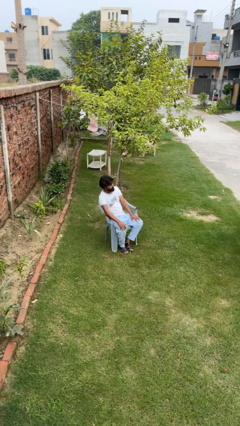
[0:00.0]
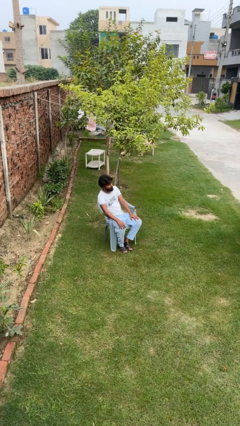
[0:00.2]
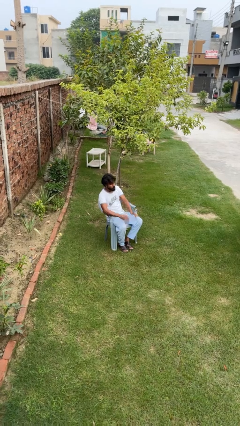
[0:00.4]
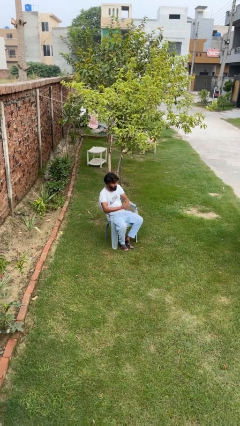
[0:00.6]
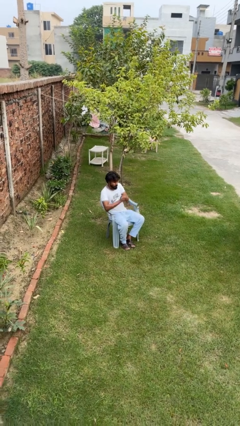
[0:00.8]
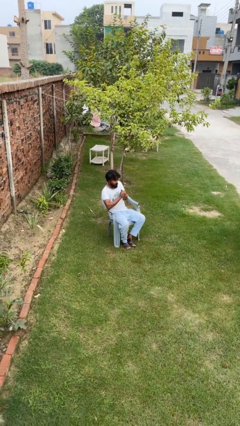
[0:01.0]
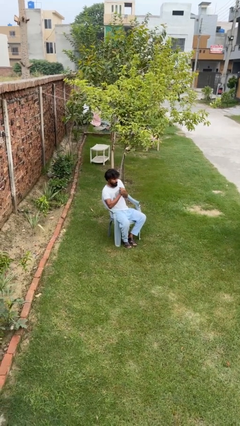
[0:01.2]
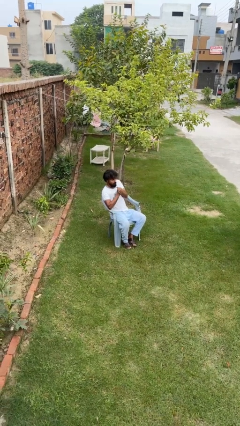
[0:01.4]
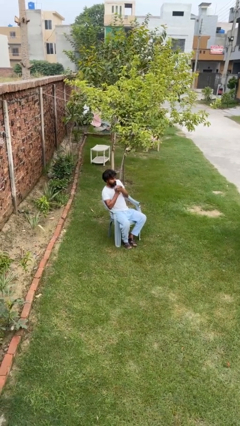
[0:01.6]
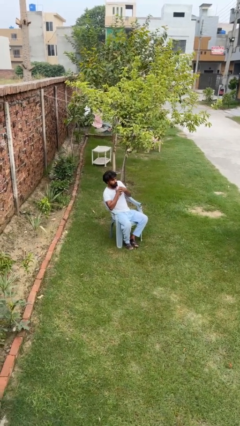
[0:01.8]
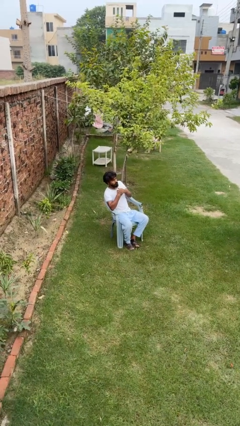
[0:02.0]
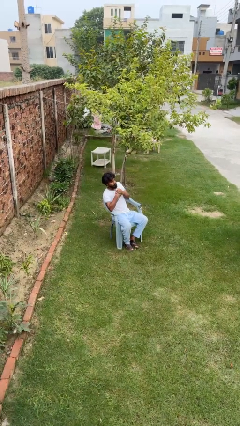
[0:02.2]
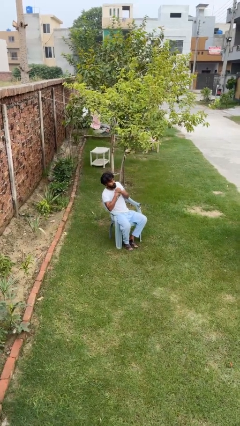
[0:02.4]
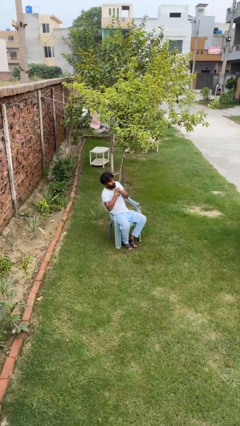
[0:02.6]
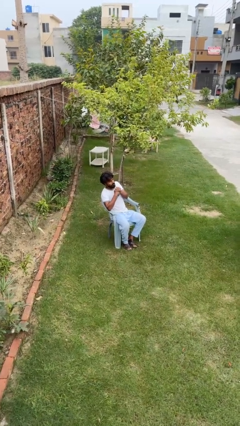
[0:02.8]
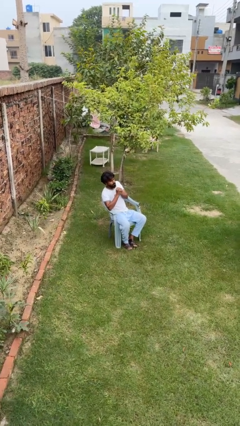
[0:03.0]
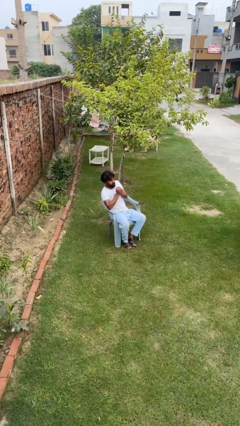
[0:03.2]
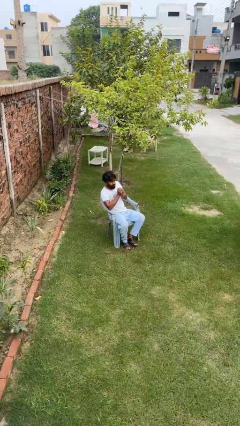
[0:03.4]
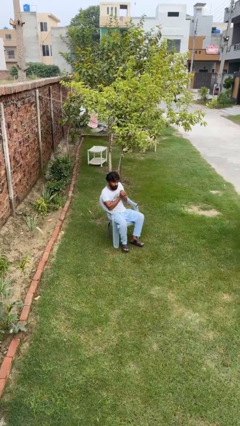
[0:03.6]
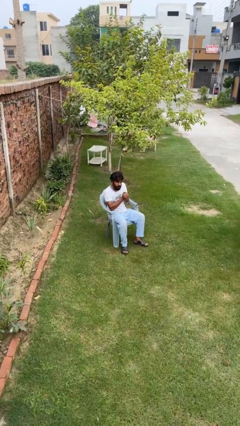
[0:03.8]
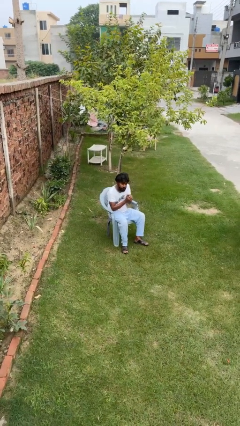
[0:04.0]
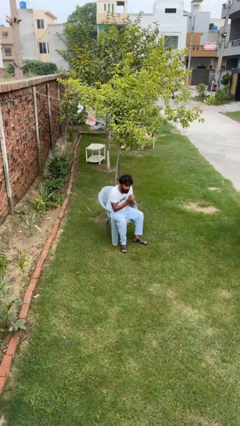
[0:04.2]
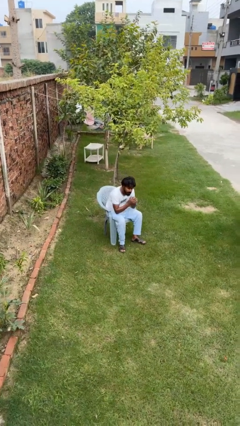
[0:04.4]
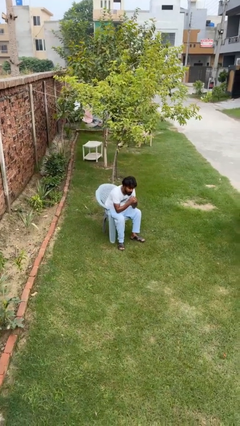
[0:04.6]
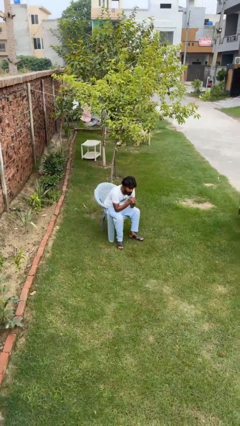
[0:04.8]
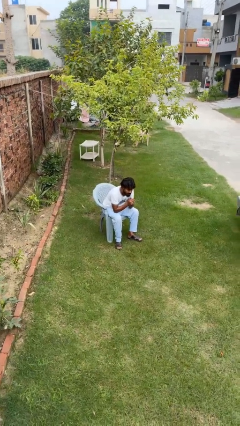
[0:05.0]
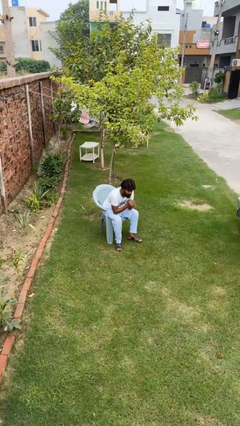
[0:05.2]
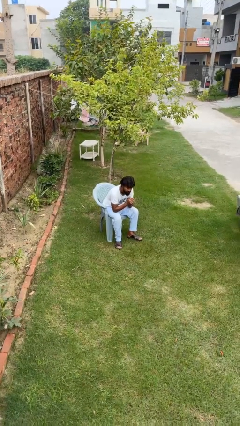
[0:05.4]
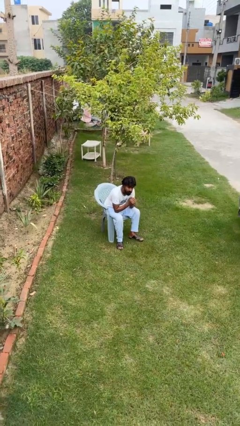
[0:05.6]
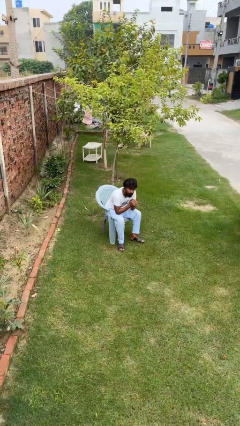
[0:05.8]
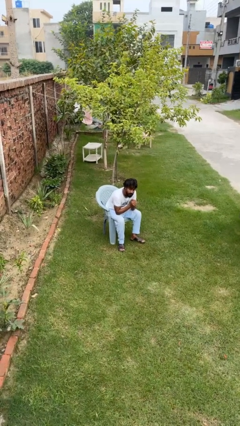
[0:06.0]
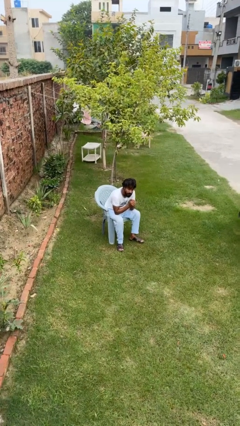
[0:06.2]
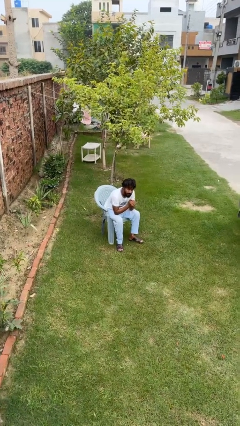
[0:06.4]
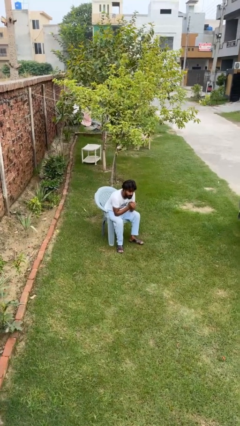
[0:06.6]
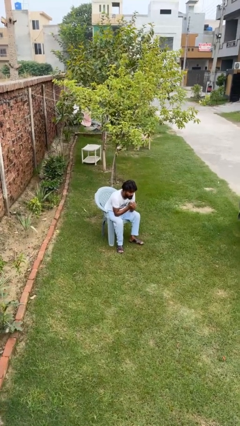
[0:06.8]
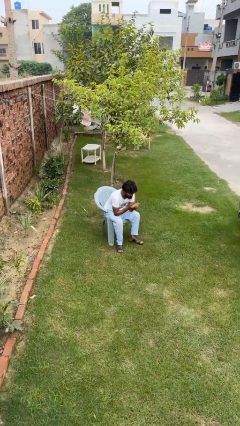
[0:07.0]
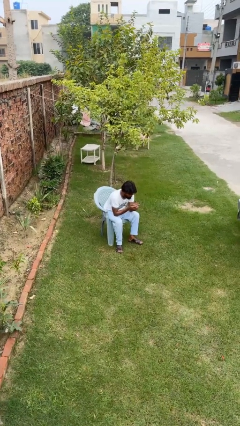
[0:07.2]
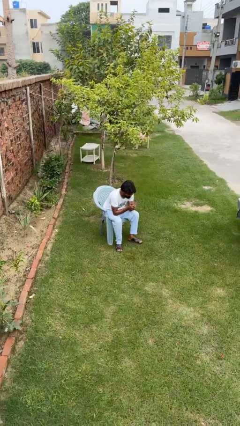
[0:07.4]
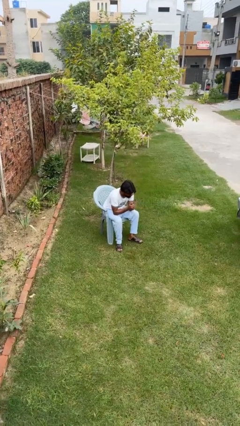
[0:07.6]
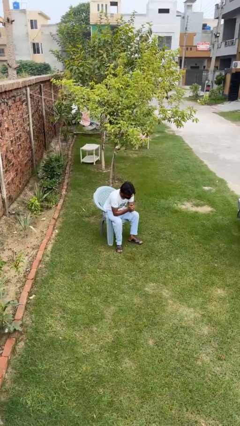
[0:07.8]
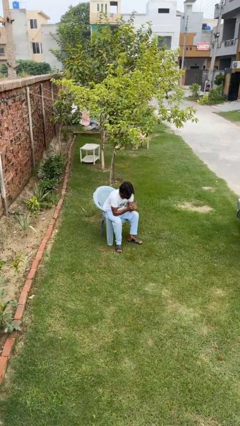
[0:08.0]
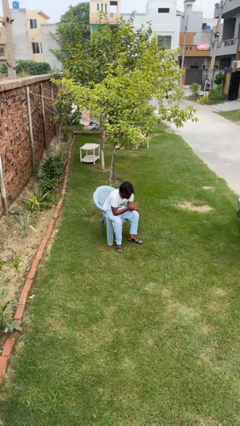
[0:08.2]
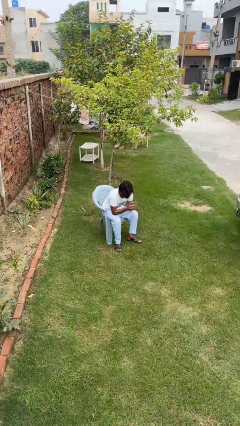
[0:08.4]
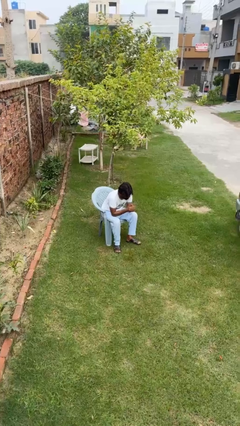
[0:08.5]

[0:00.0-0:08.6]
person looks at hands in lap

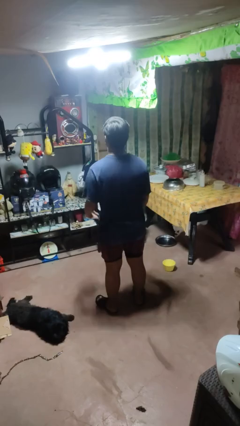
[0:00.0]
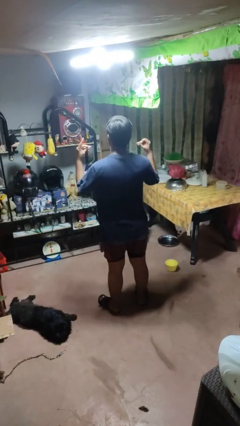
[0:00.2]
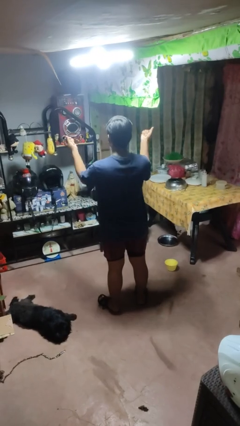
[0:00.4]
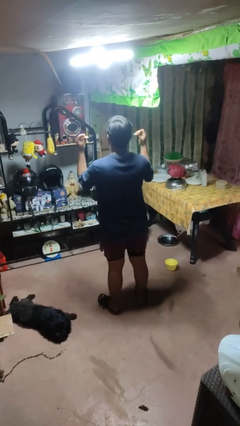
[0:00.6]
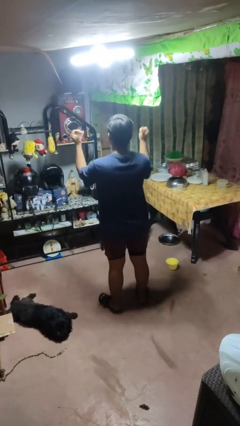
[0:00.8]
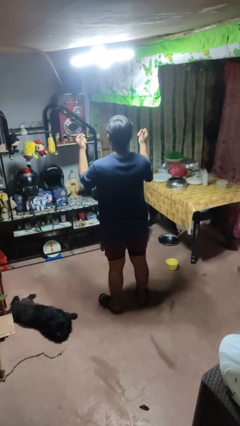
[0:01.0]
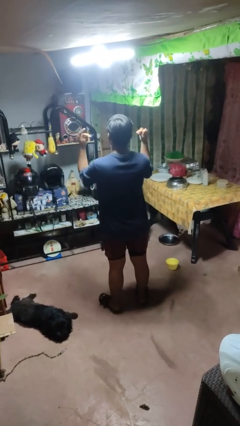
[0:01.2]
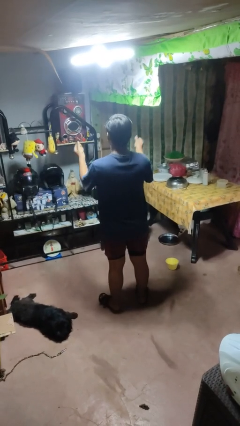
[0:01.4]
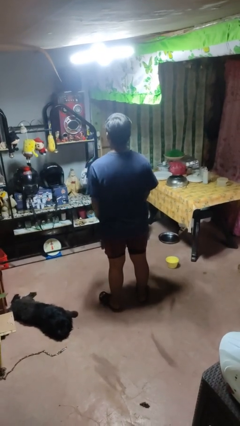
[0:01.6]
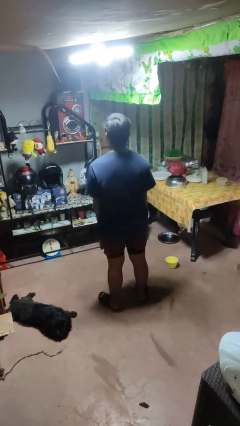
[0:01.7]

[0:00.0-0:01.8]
person snaps fingers

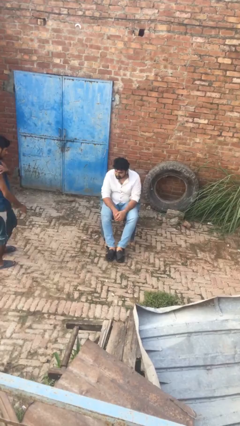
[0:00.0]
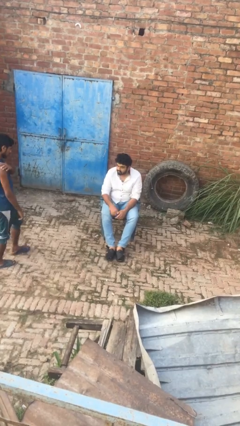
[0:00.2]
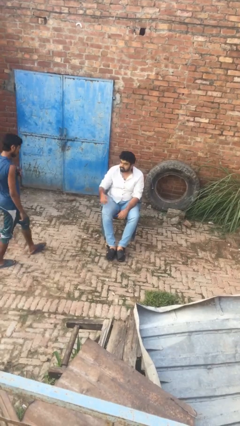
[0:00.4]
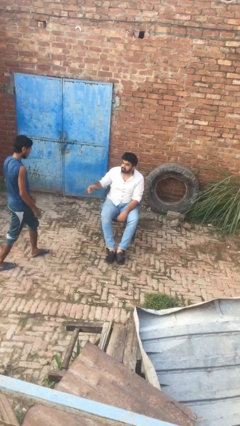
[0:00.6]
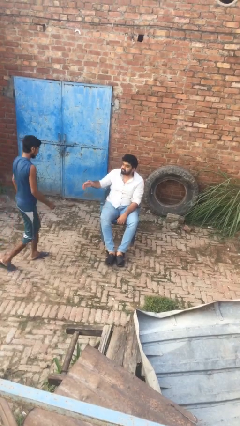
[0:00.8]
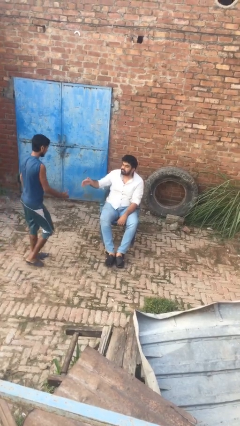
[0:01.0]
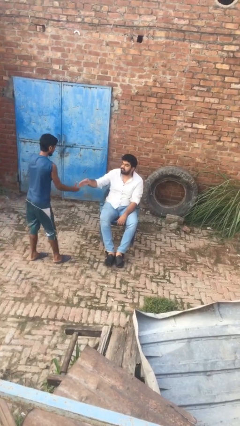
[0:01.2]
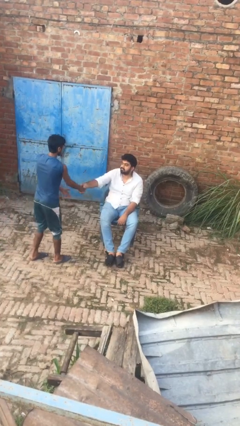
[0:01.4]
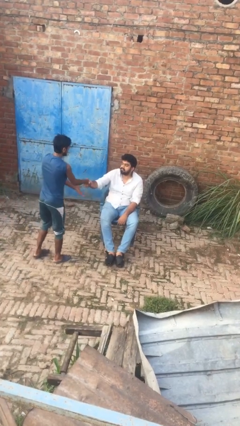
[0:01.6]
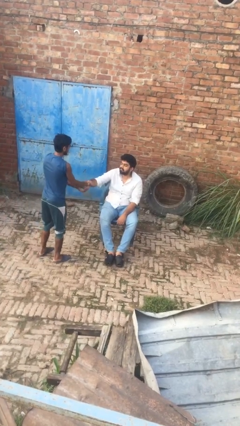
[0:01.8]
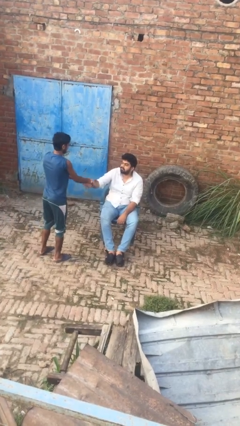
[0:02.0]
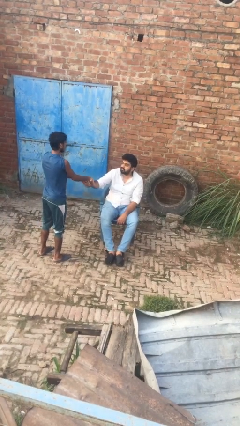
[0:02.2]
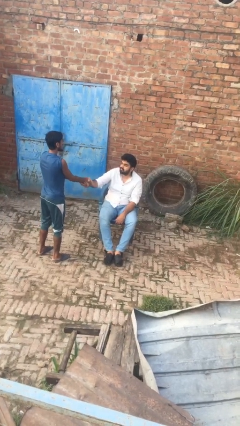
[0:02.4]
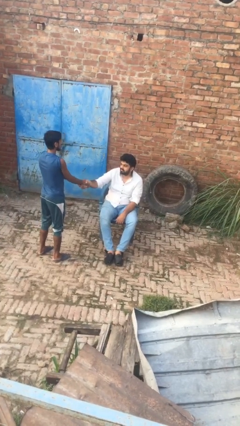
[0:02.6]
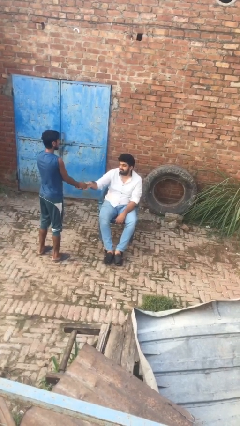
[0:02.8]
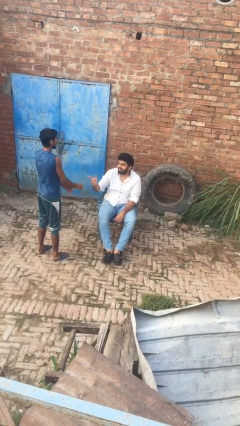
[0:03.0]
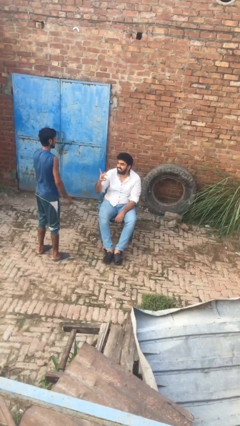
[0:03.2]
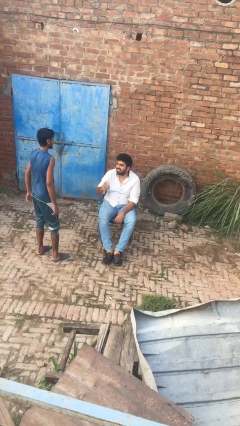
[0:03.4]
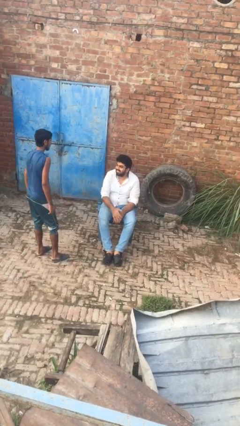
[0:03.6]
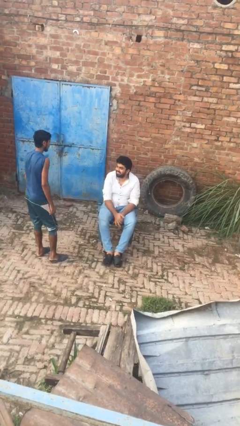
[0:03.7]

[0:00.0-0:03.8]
person shakes hand

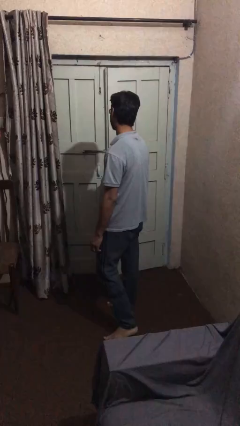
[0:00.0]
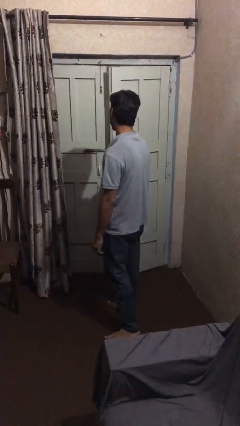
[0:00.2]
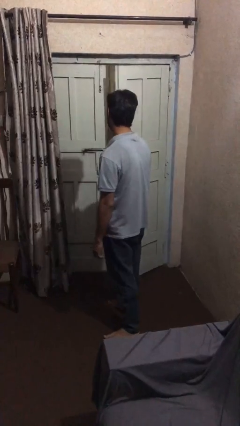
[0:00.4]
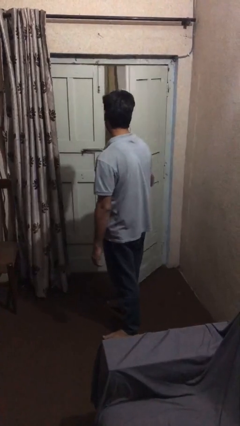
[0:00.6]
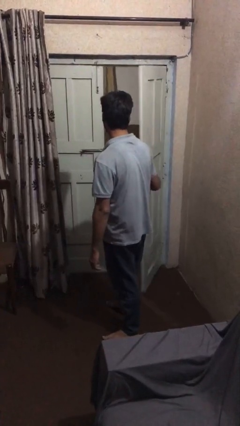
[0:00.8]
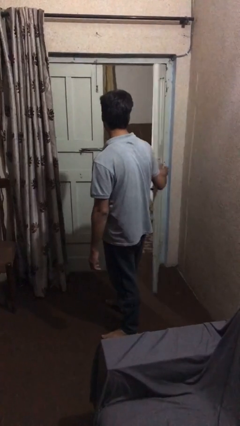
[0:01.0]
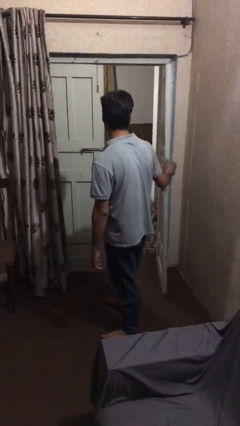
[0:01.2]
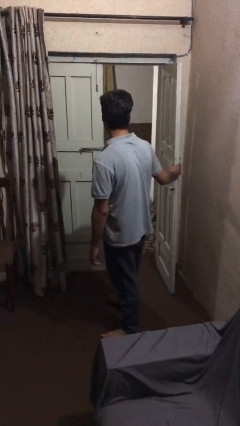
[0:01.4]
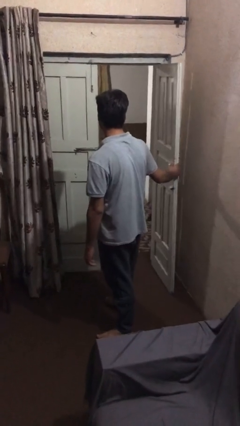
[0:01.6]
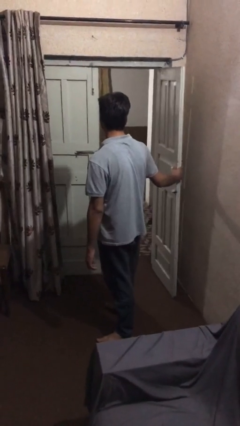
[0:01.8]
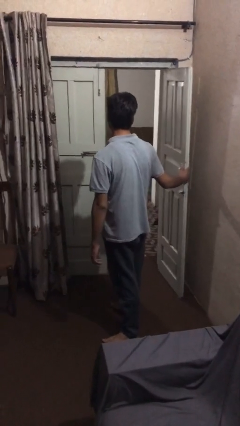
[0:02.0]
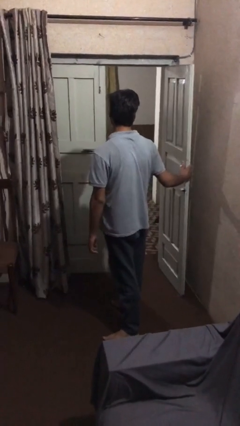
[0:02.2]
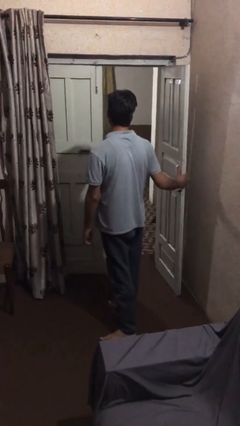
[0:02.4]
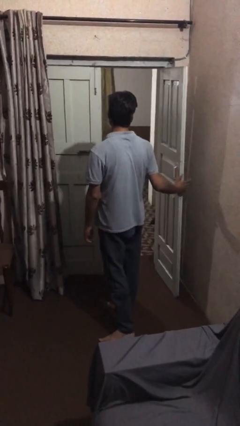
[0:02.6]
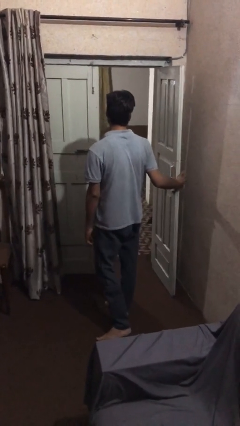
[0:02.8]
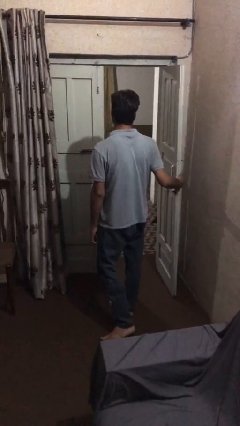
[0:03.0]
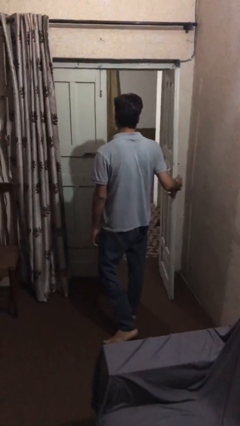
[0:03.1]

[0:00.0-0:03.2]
person opens facility door

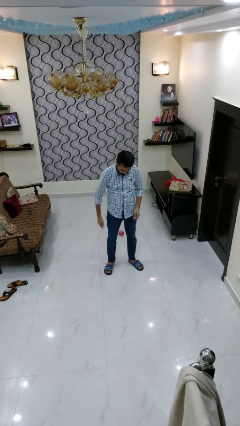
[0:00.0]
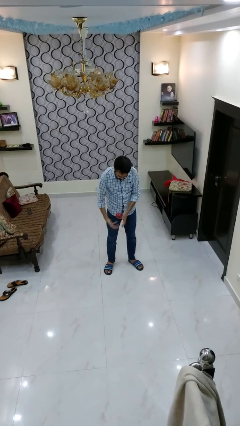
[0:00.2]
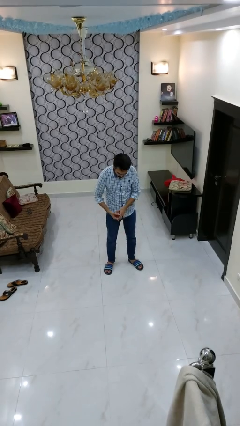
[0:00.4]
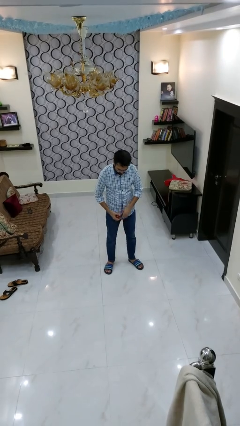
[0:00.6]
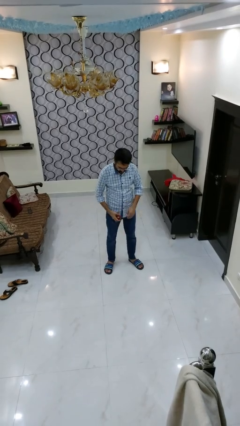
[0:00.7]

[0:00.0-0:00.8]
person bounces ball on floor
